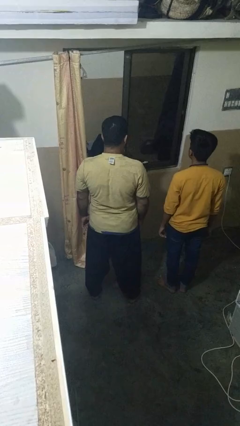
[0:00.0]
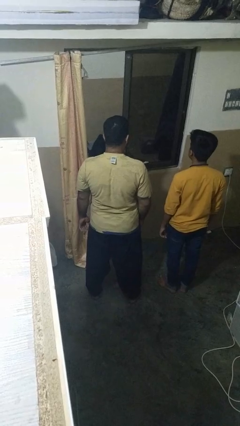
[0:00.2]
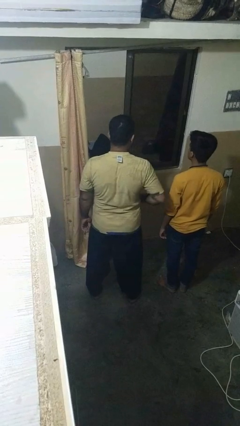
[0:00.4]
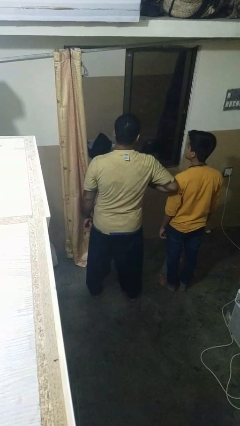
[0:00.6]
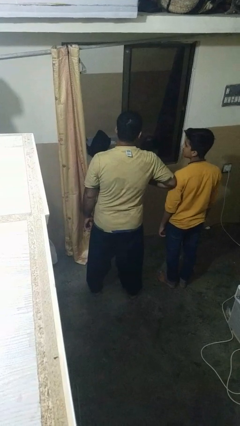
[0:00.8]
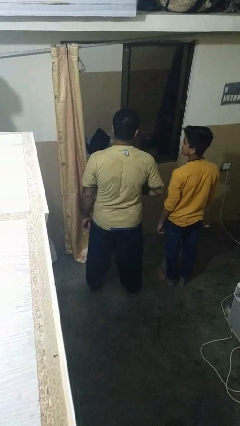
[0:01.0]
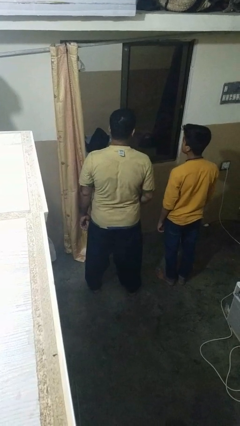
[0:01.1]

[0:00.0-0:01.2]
person nudges person with elbow

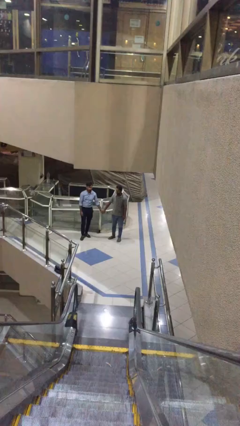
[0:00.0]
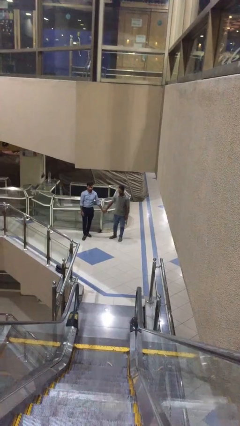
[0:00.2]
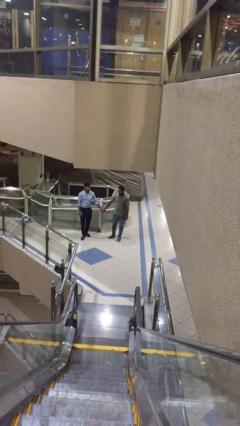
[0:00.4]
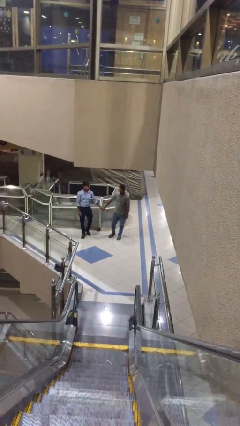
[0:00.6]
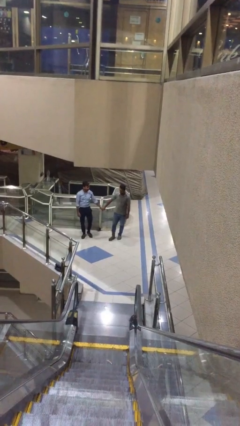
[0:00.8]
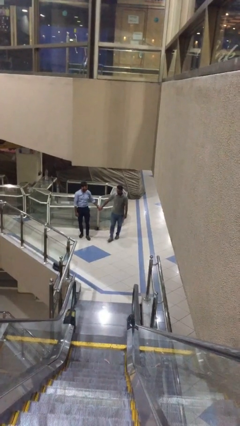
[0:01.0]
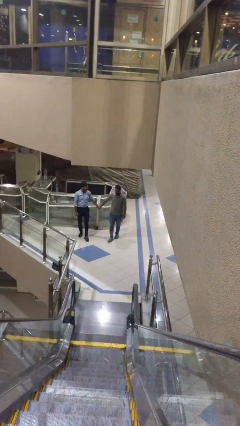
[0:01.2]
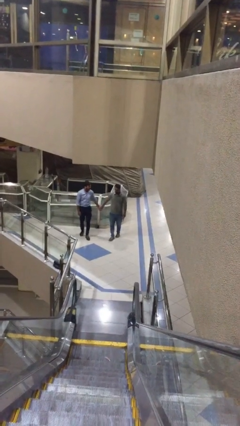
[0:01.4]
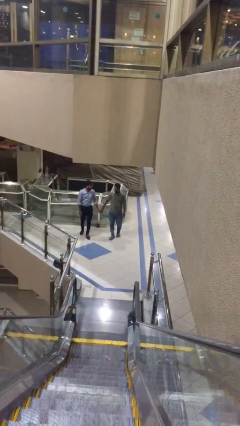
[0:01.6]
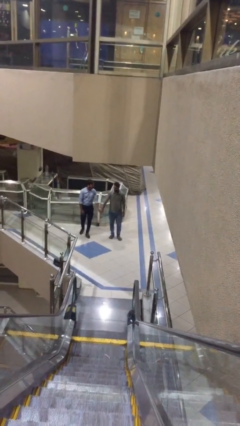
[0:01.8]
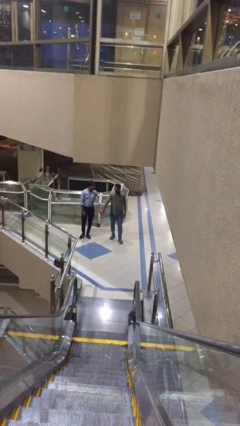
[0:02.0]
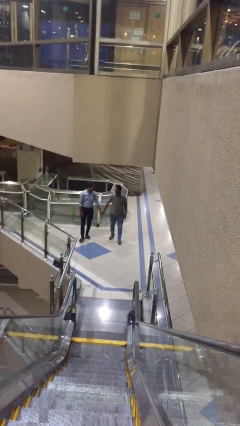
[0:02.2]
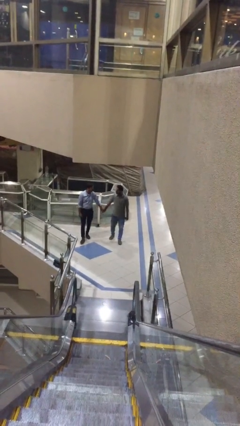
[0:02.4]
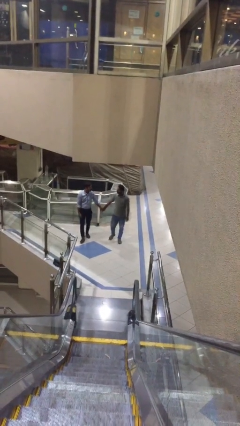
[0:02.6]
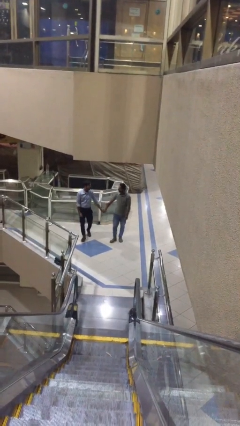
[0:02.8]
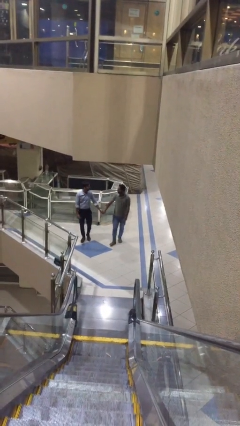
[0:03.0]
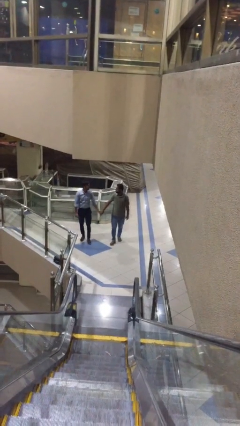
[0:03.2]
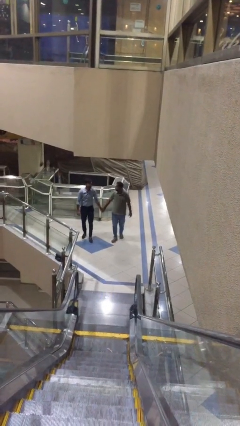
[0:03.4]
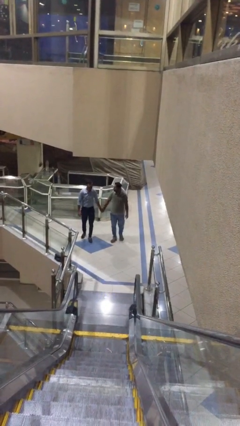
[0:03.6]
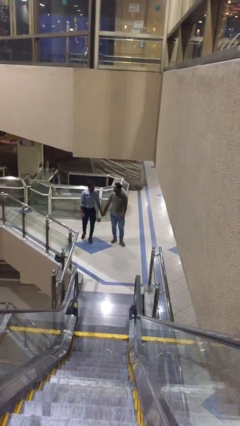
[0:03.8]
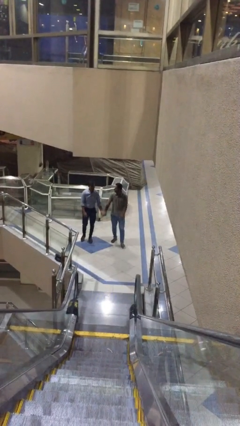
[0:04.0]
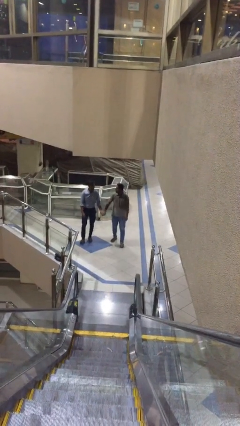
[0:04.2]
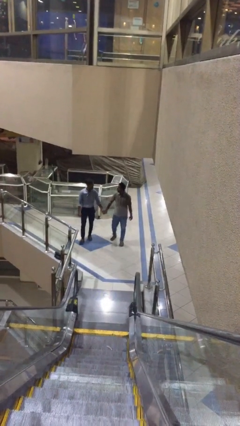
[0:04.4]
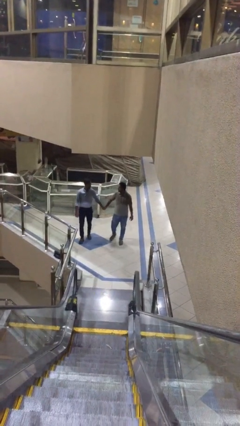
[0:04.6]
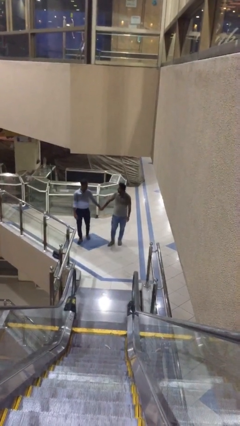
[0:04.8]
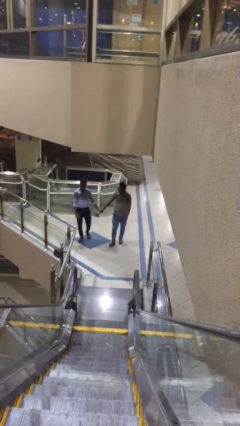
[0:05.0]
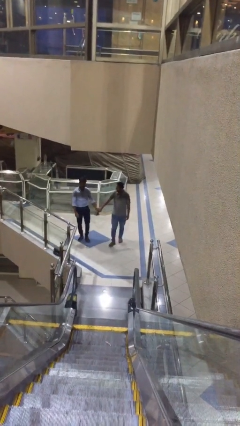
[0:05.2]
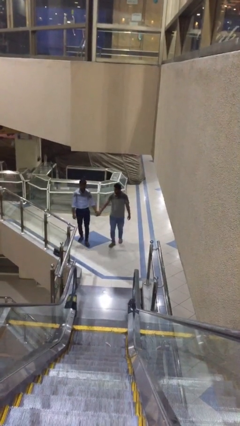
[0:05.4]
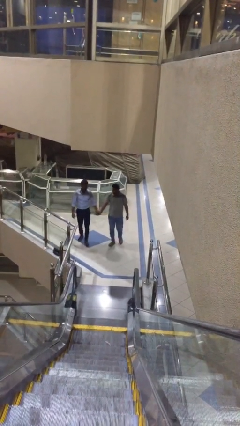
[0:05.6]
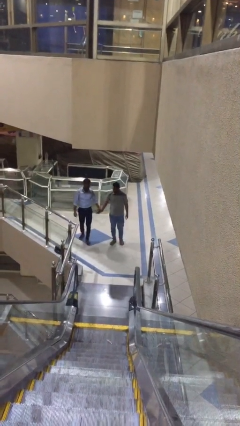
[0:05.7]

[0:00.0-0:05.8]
person holds hand

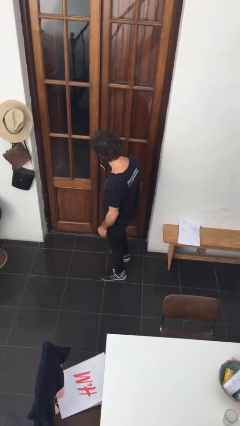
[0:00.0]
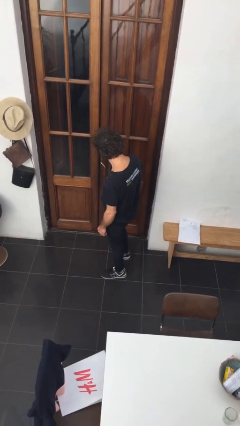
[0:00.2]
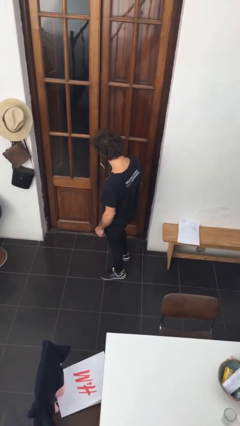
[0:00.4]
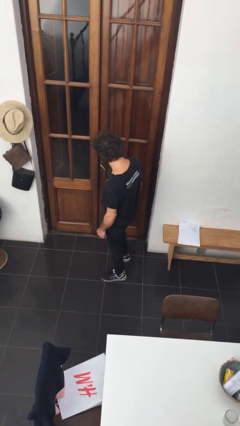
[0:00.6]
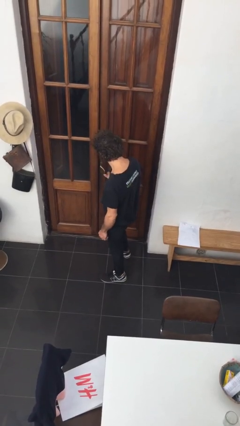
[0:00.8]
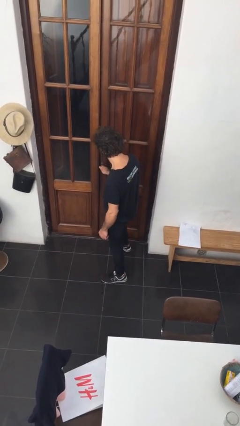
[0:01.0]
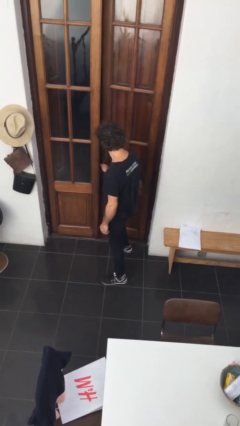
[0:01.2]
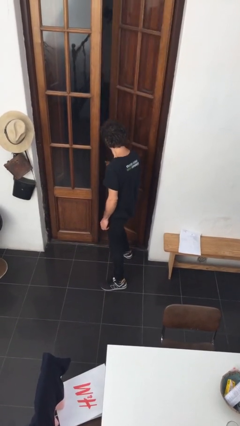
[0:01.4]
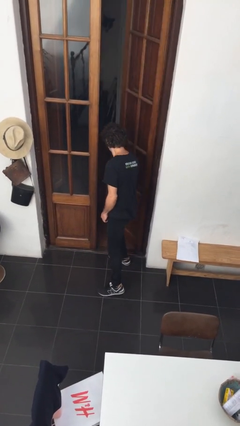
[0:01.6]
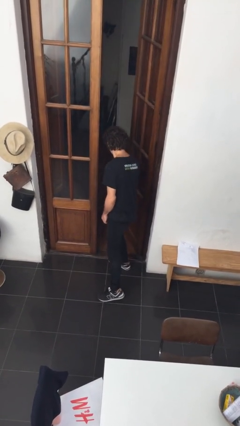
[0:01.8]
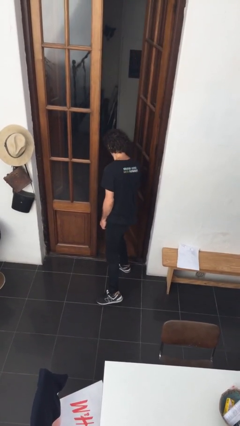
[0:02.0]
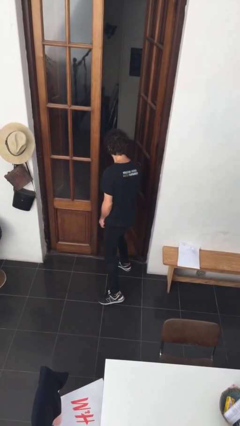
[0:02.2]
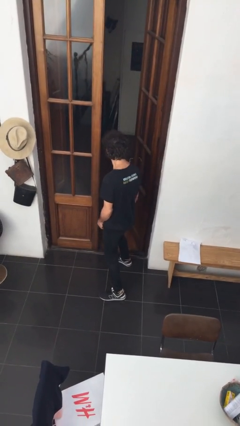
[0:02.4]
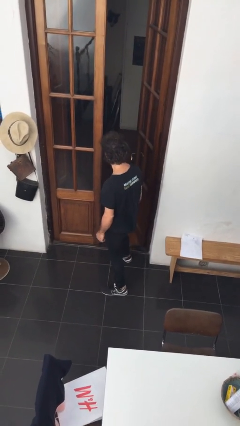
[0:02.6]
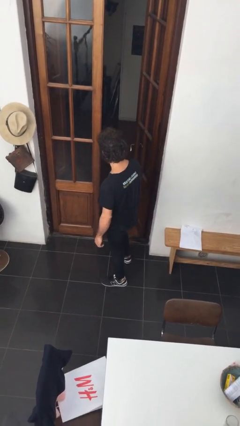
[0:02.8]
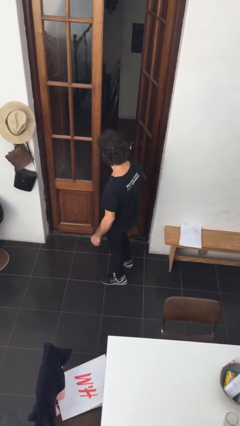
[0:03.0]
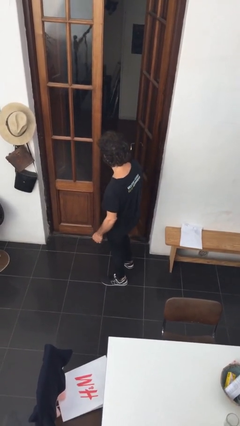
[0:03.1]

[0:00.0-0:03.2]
person opens facility door

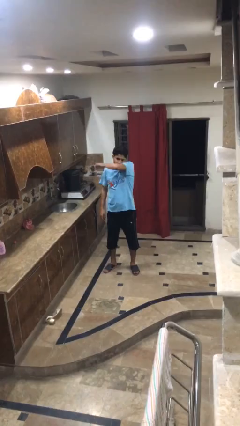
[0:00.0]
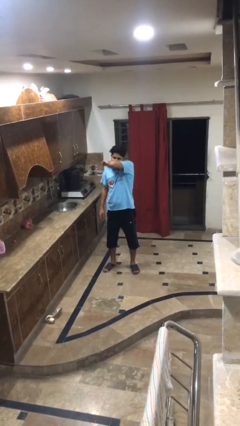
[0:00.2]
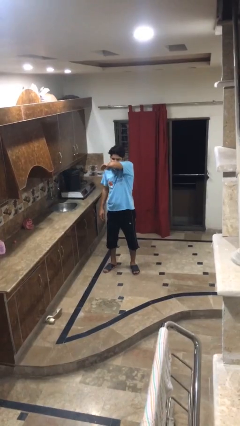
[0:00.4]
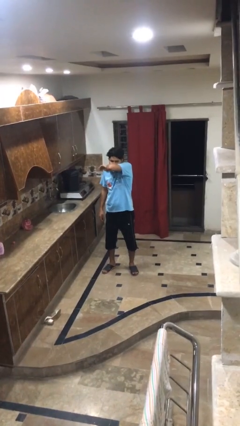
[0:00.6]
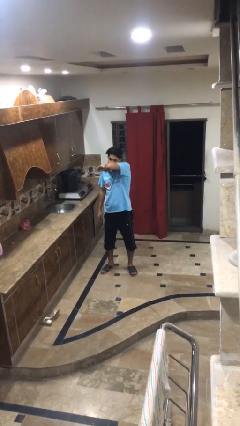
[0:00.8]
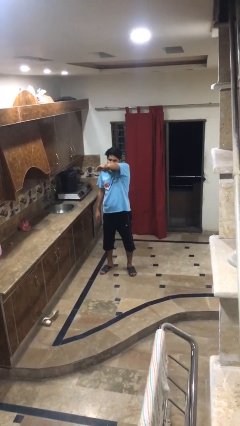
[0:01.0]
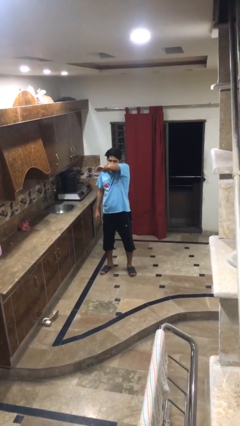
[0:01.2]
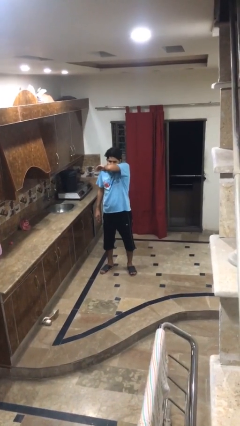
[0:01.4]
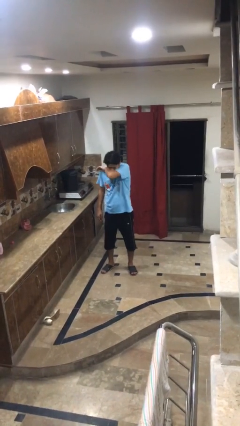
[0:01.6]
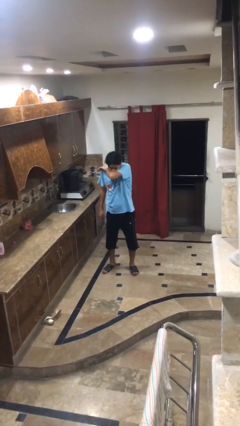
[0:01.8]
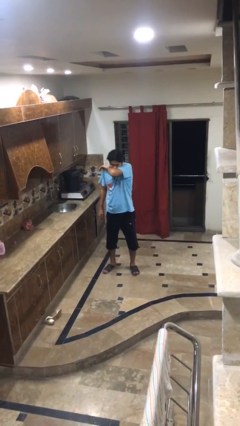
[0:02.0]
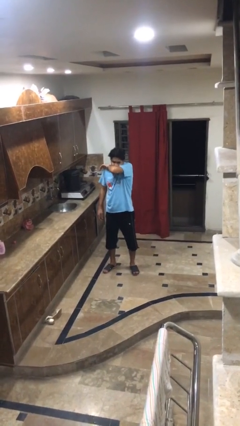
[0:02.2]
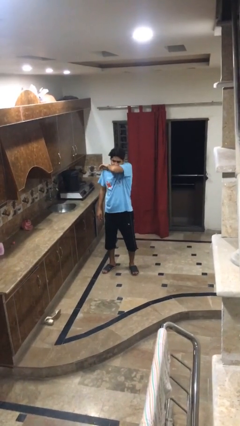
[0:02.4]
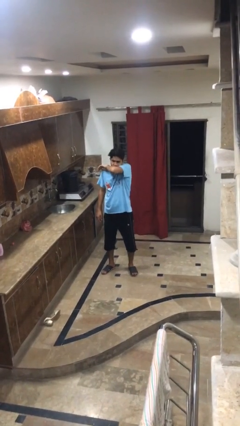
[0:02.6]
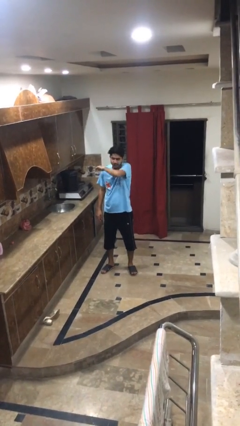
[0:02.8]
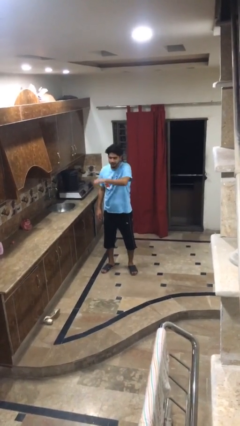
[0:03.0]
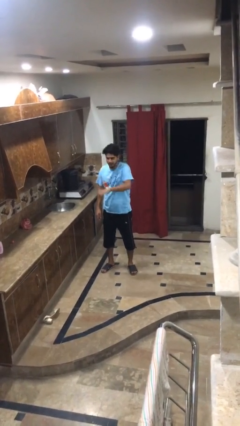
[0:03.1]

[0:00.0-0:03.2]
person sneezes into arm

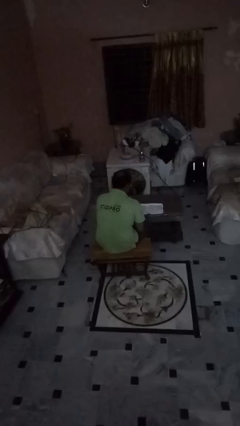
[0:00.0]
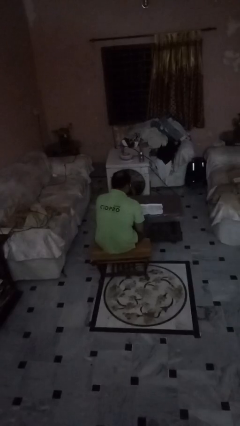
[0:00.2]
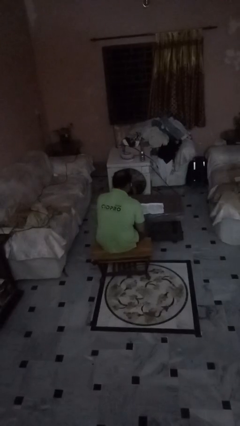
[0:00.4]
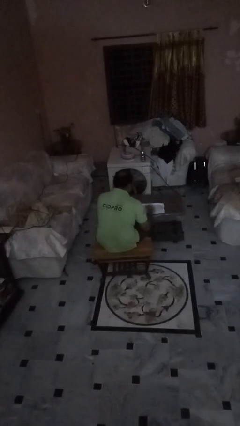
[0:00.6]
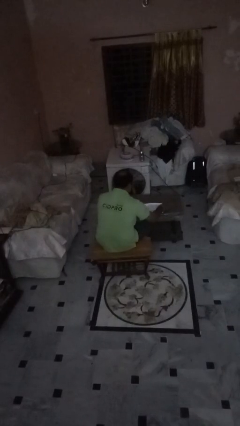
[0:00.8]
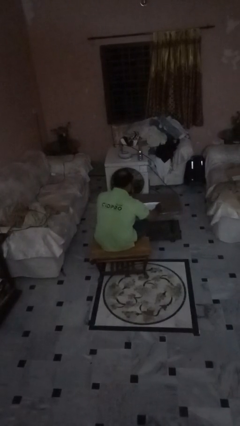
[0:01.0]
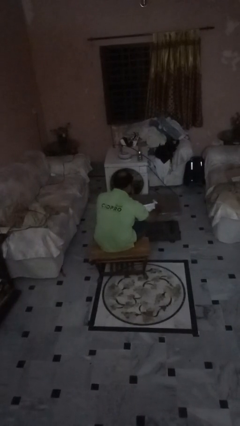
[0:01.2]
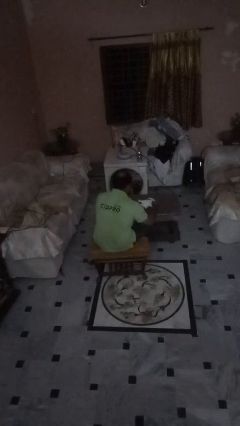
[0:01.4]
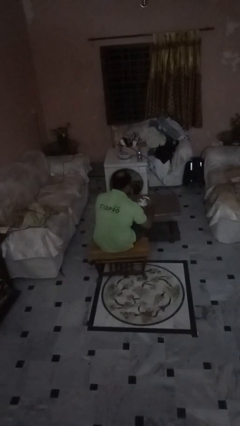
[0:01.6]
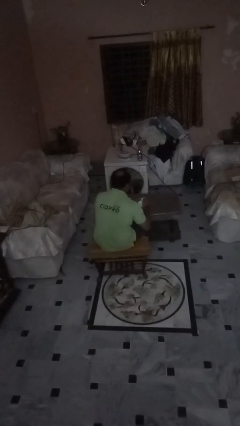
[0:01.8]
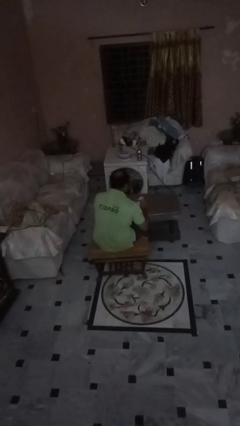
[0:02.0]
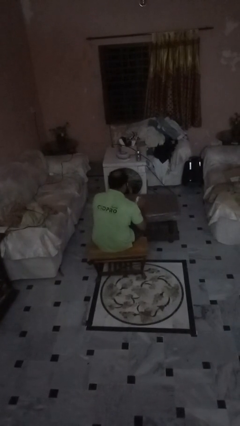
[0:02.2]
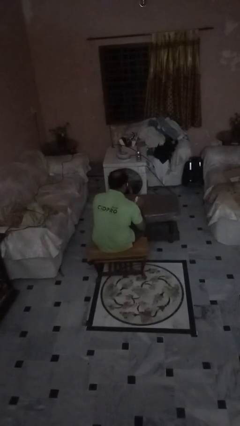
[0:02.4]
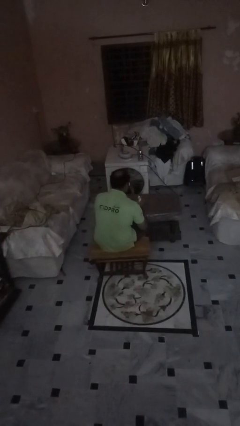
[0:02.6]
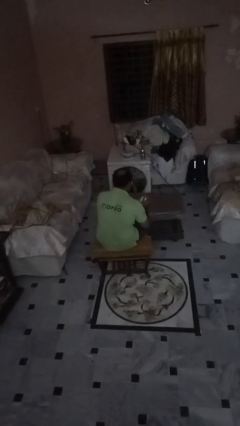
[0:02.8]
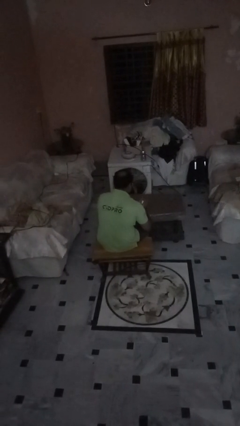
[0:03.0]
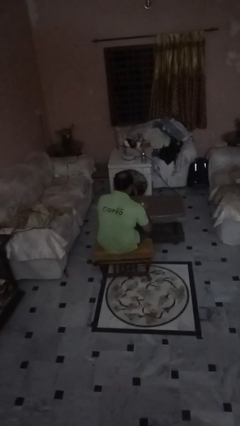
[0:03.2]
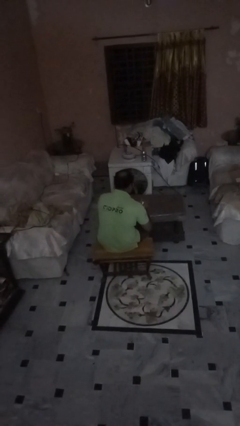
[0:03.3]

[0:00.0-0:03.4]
person crumples paper

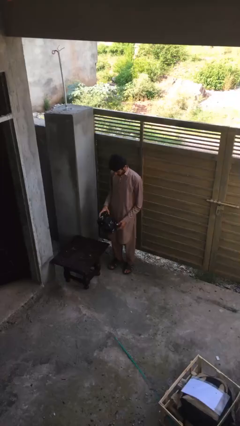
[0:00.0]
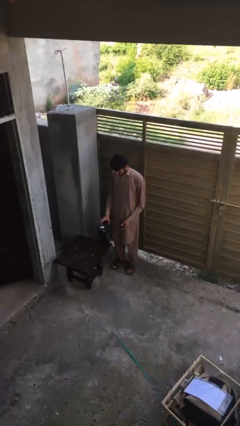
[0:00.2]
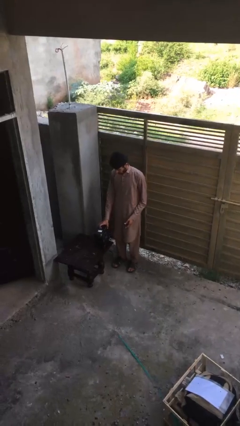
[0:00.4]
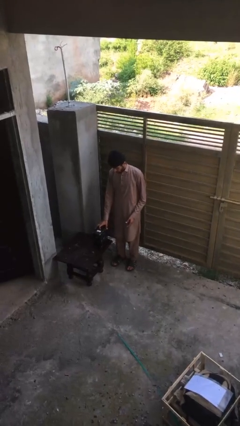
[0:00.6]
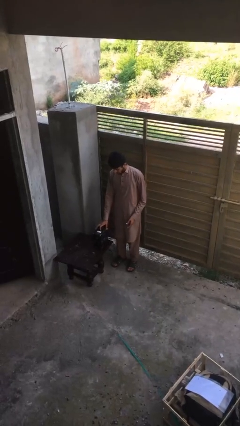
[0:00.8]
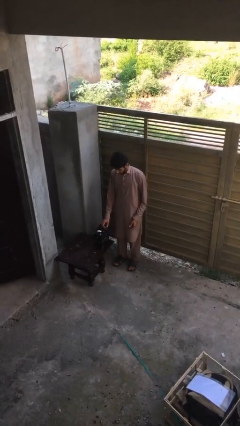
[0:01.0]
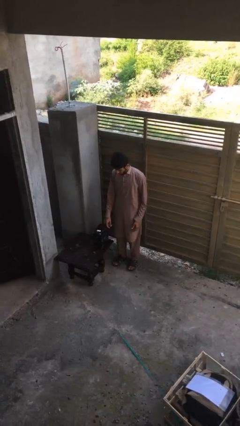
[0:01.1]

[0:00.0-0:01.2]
person puts down object on table
